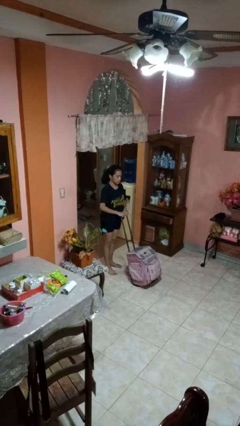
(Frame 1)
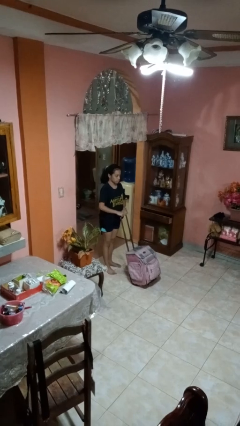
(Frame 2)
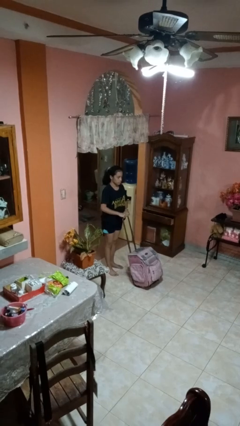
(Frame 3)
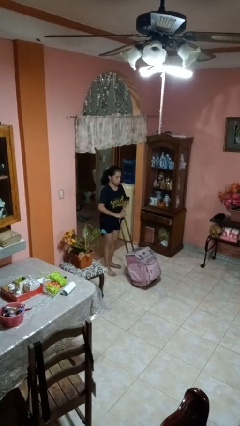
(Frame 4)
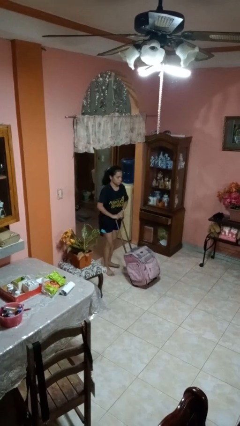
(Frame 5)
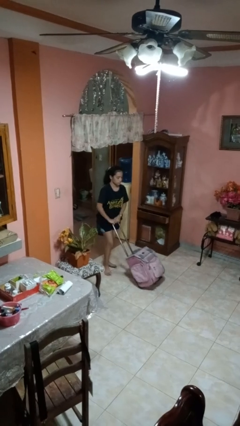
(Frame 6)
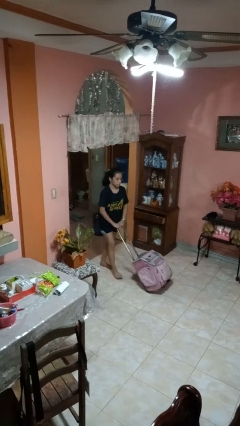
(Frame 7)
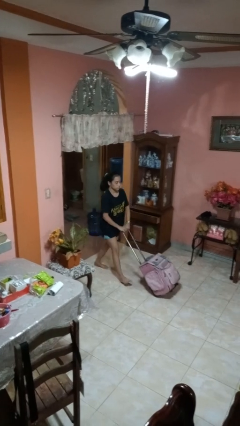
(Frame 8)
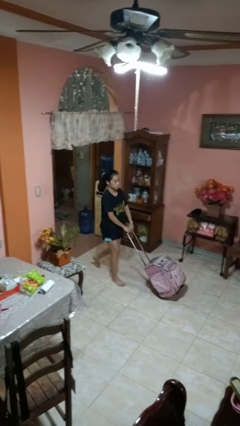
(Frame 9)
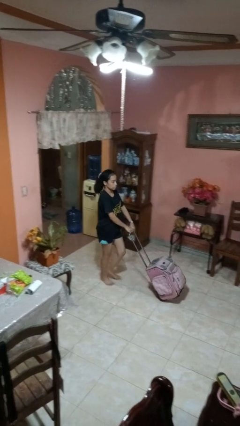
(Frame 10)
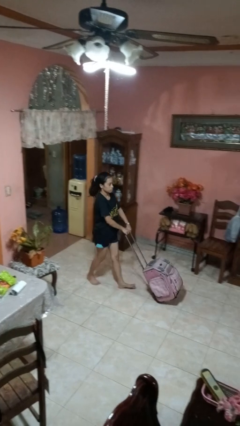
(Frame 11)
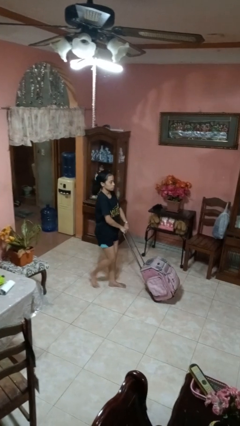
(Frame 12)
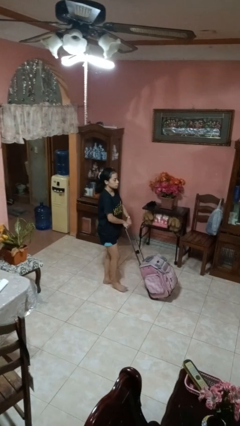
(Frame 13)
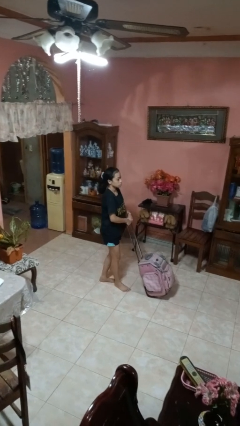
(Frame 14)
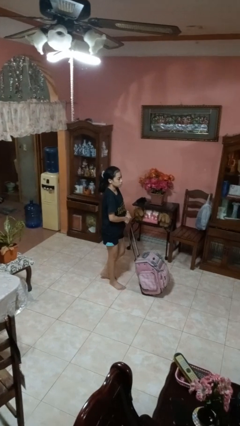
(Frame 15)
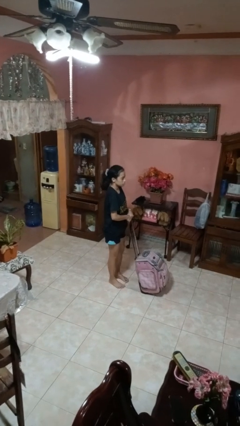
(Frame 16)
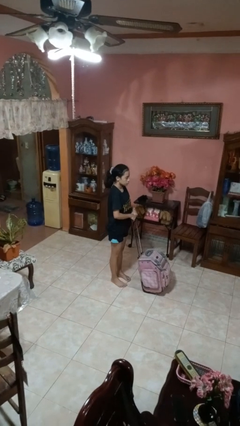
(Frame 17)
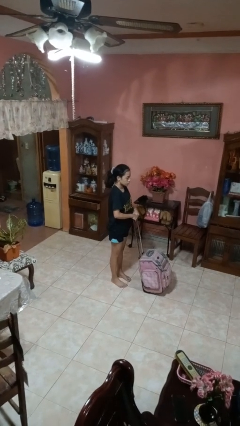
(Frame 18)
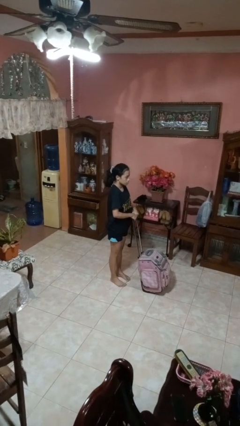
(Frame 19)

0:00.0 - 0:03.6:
person pushes wheeled cart

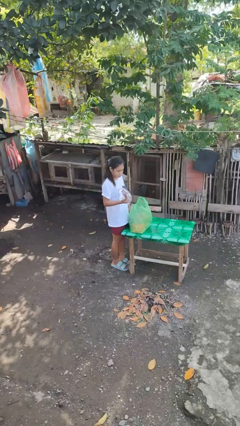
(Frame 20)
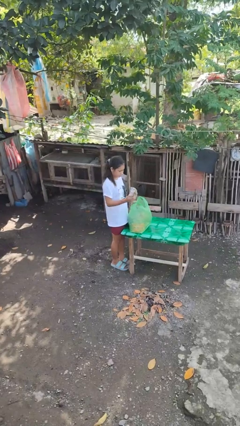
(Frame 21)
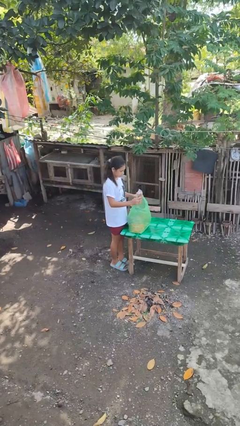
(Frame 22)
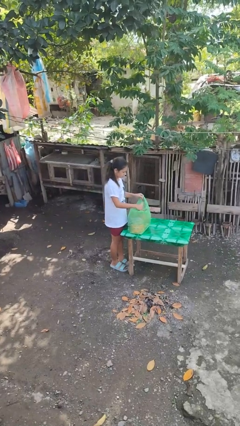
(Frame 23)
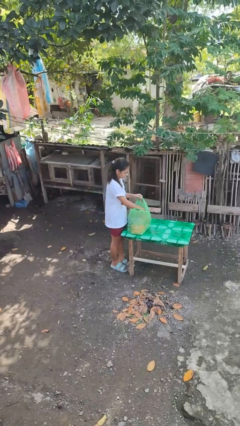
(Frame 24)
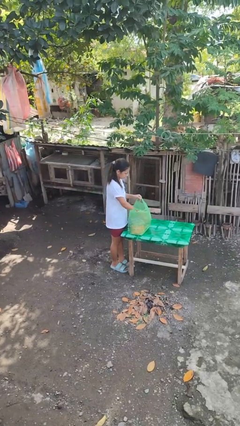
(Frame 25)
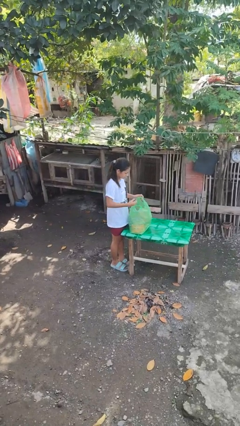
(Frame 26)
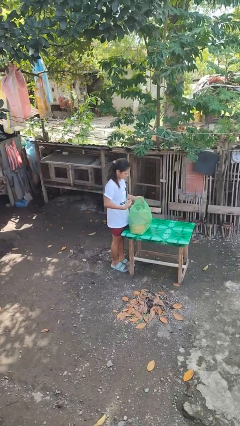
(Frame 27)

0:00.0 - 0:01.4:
person puts object into bag

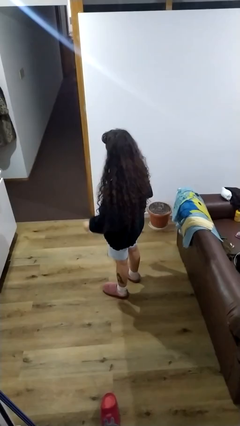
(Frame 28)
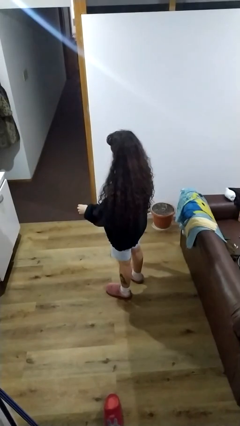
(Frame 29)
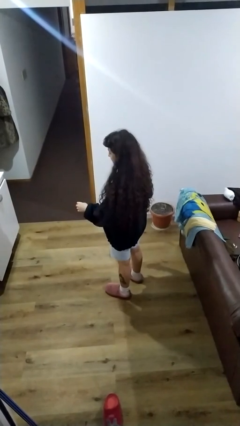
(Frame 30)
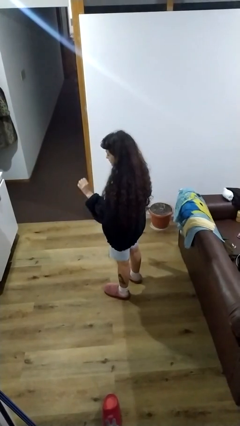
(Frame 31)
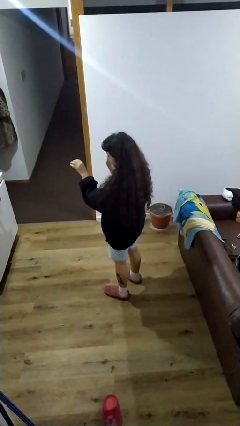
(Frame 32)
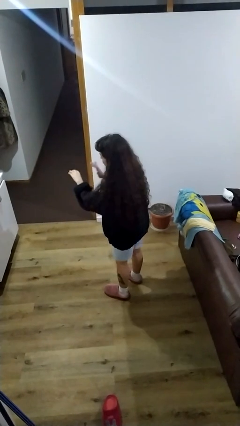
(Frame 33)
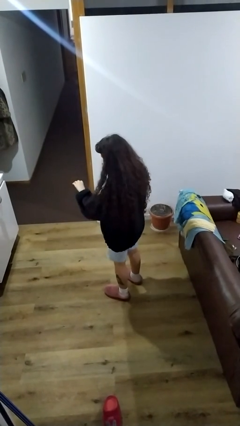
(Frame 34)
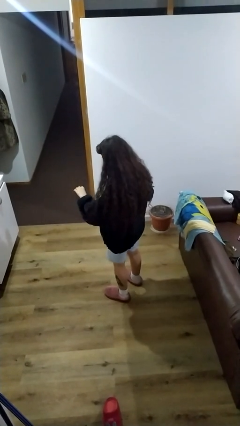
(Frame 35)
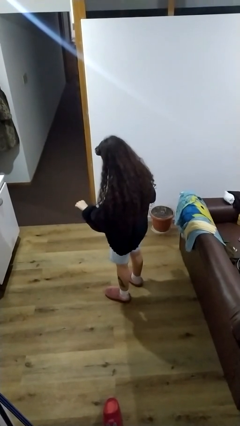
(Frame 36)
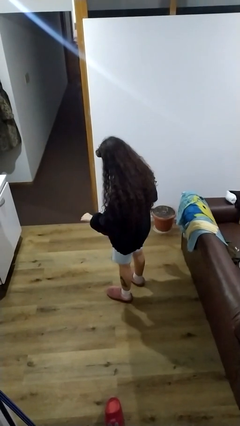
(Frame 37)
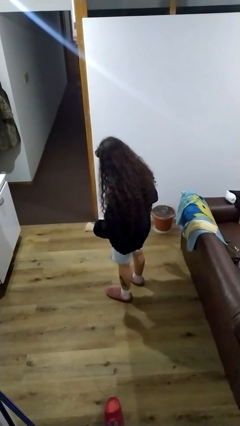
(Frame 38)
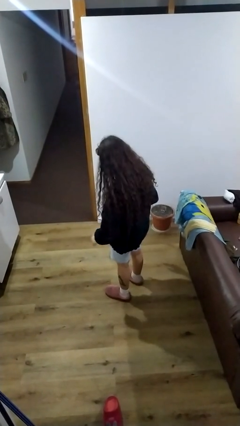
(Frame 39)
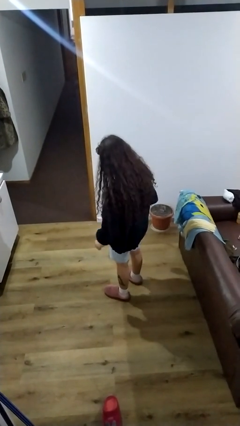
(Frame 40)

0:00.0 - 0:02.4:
person swats bug

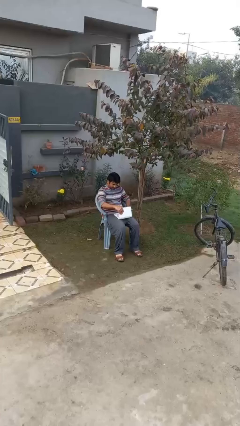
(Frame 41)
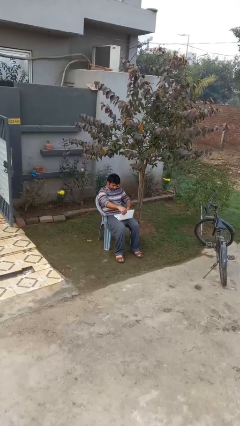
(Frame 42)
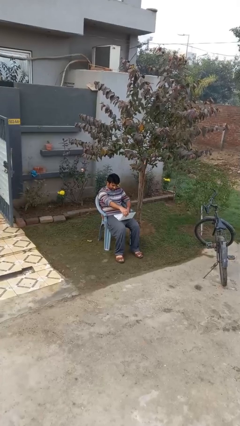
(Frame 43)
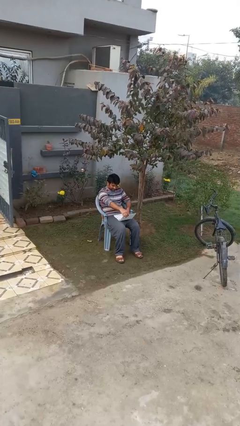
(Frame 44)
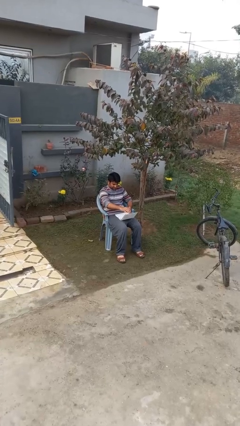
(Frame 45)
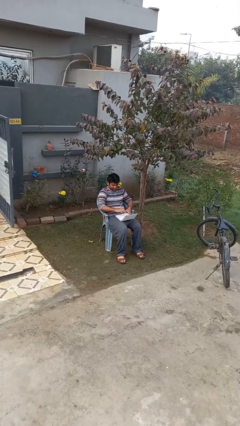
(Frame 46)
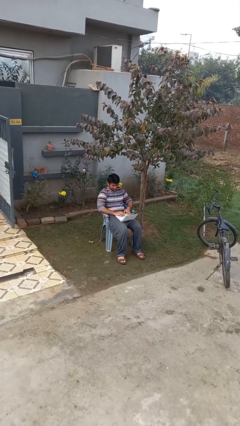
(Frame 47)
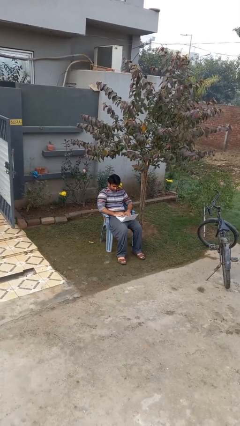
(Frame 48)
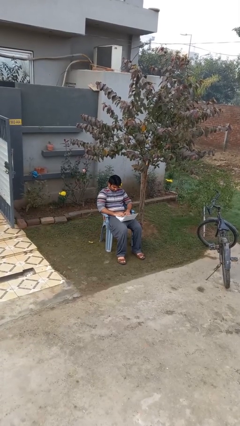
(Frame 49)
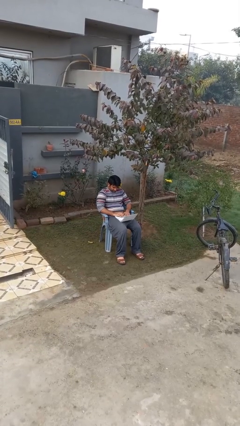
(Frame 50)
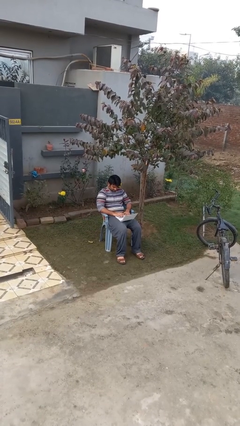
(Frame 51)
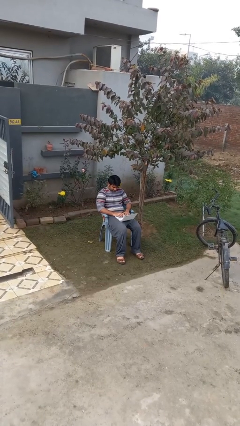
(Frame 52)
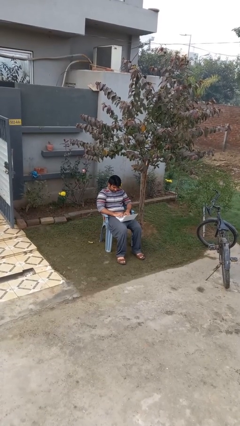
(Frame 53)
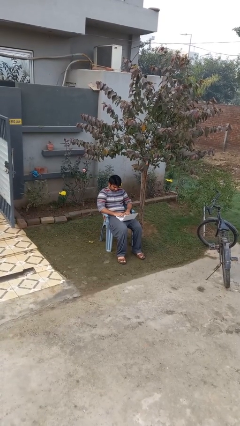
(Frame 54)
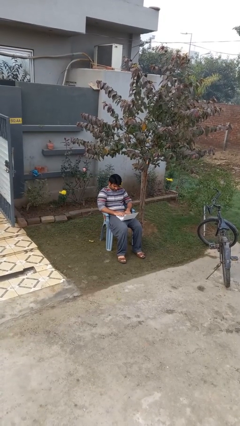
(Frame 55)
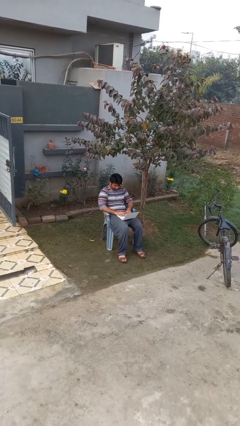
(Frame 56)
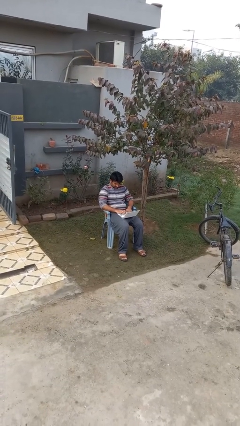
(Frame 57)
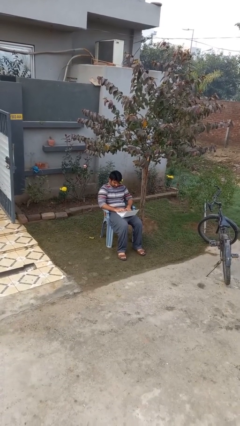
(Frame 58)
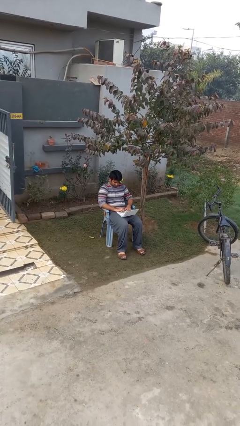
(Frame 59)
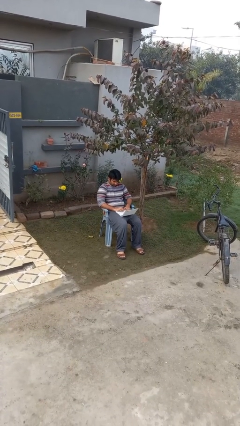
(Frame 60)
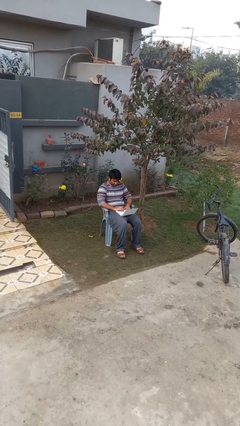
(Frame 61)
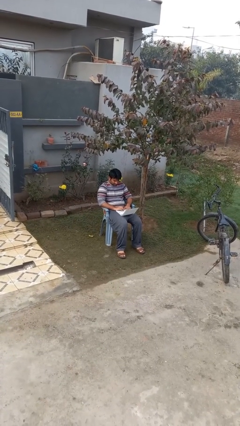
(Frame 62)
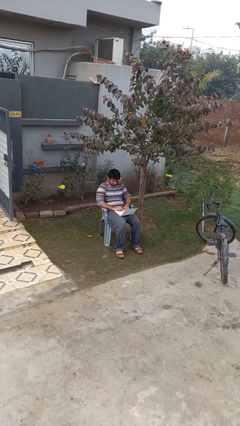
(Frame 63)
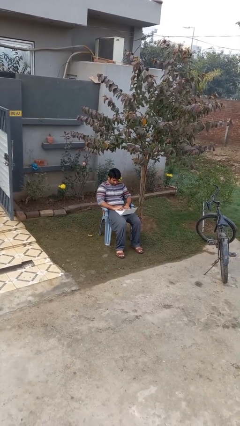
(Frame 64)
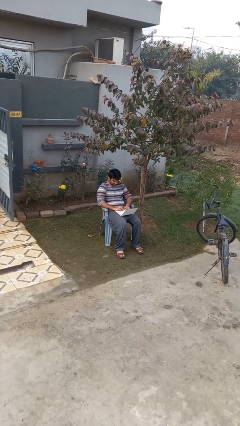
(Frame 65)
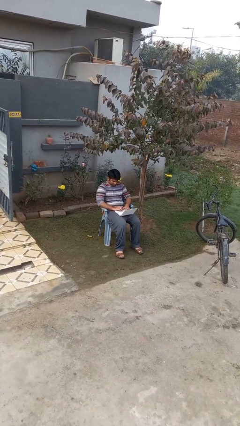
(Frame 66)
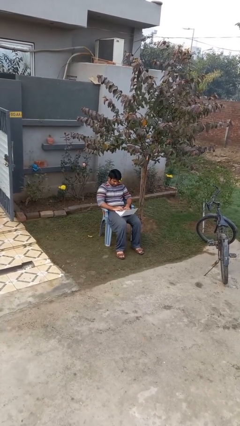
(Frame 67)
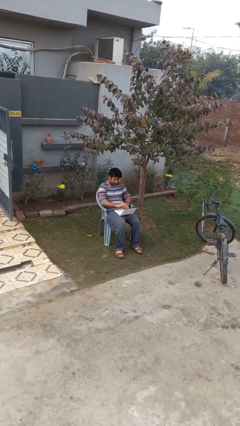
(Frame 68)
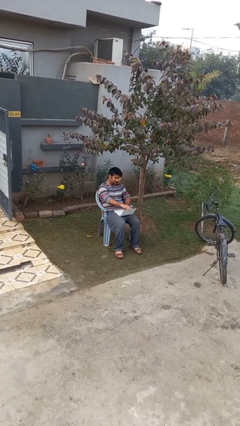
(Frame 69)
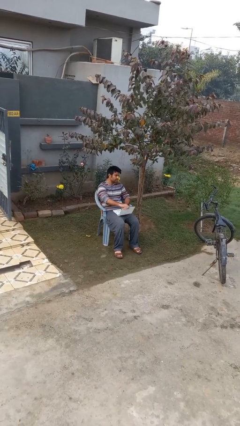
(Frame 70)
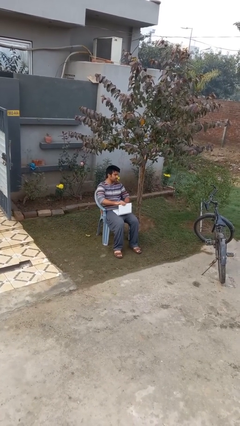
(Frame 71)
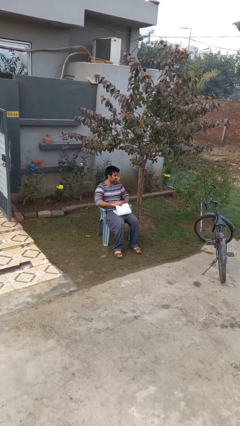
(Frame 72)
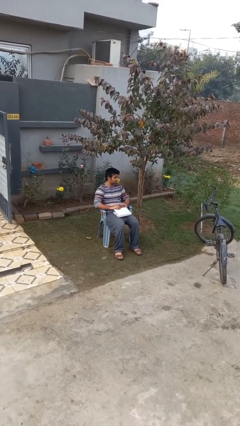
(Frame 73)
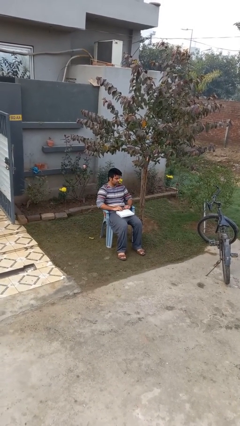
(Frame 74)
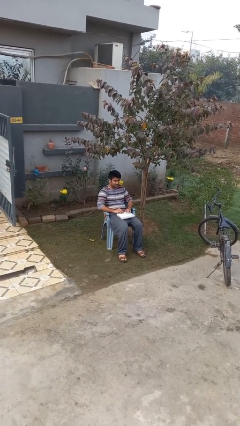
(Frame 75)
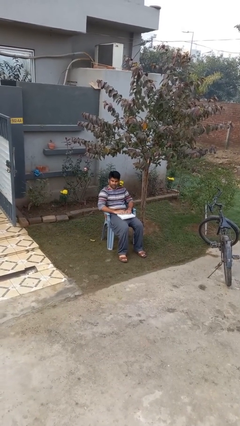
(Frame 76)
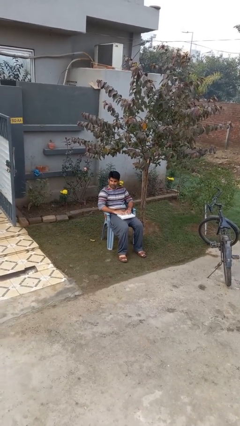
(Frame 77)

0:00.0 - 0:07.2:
person interacts with laptop

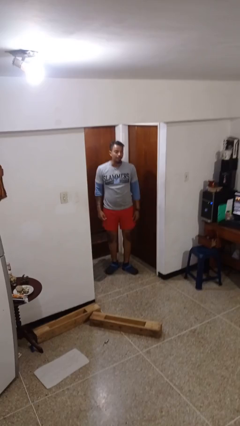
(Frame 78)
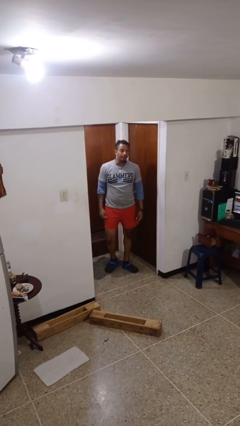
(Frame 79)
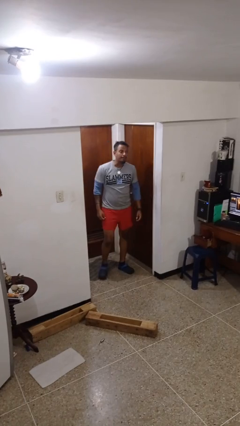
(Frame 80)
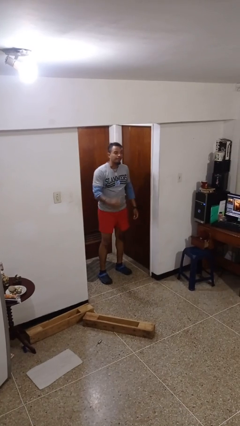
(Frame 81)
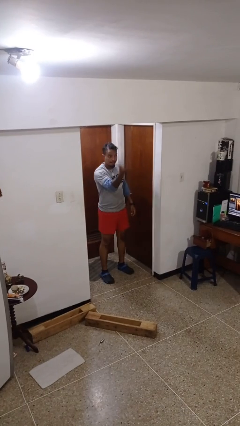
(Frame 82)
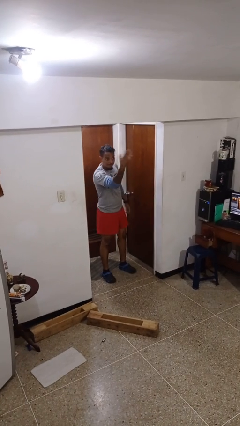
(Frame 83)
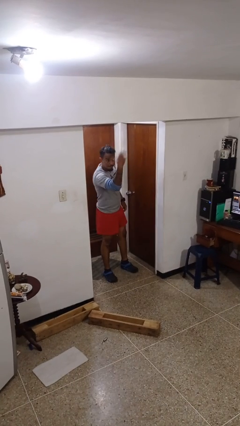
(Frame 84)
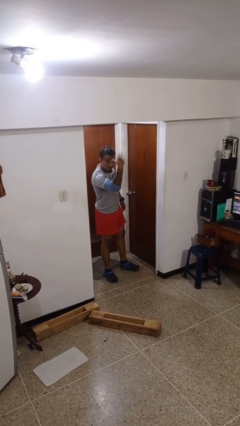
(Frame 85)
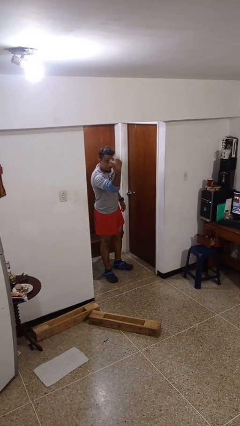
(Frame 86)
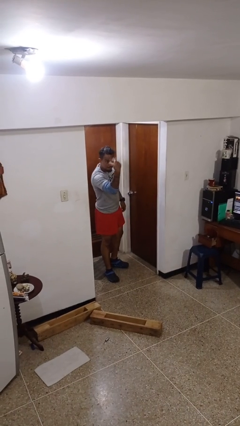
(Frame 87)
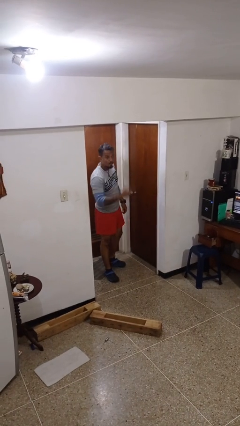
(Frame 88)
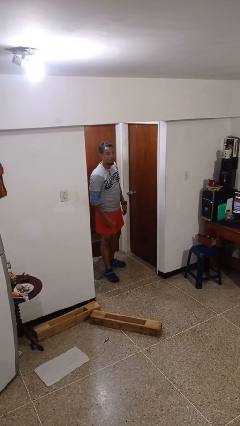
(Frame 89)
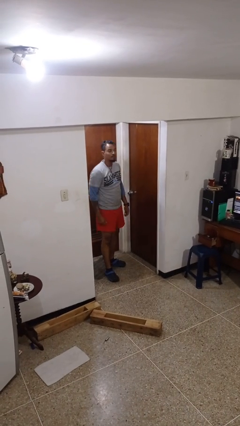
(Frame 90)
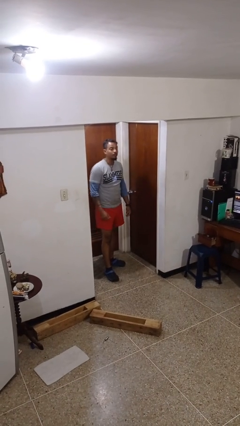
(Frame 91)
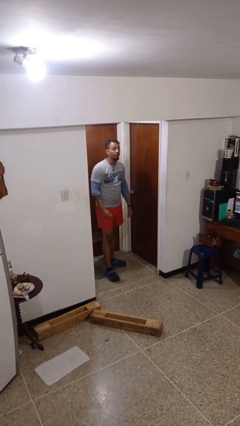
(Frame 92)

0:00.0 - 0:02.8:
person gestures come here
